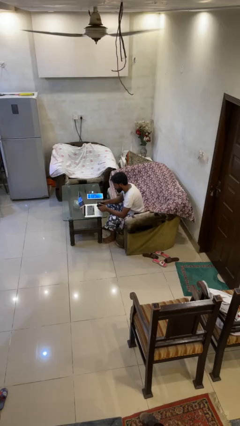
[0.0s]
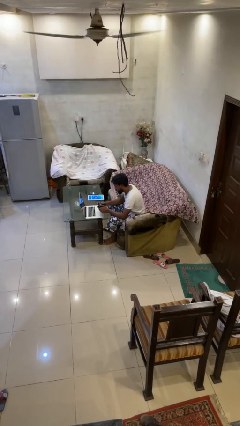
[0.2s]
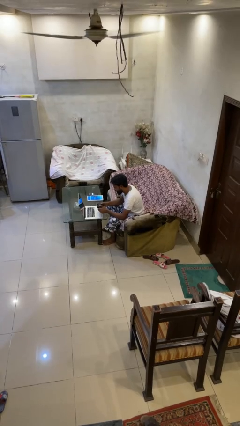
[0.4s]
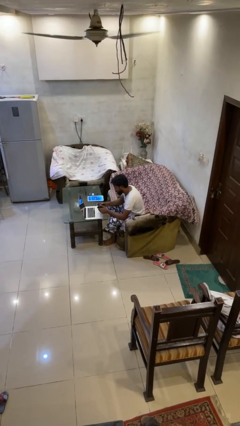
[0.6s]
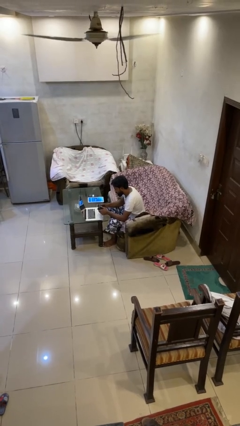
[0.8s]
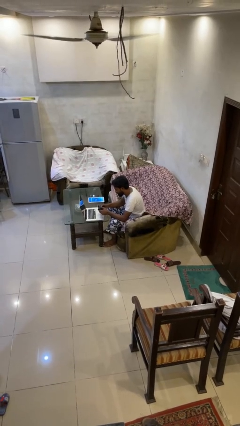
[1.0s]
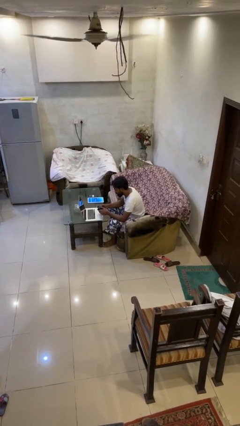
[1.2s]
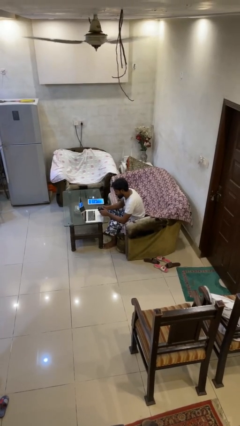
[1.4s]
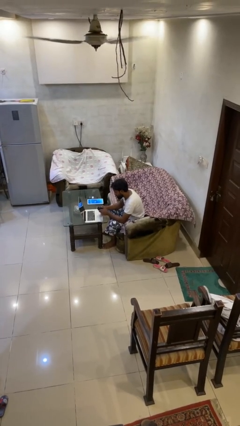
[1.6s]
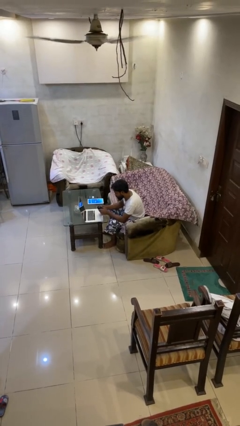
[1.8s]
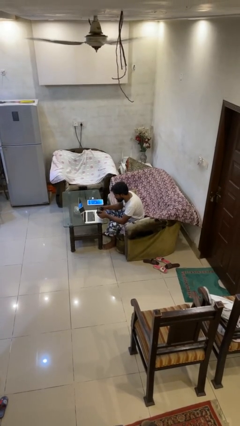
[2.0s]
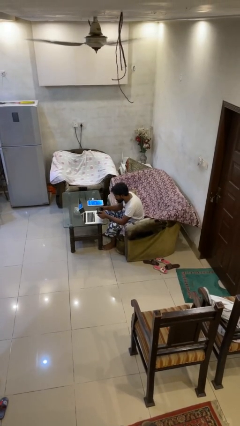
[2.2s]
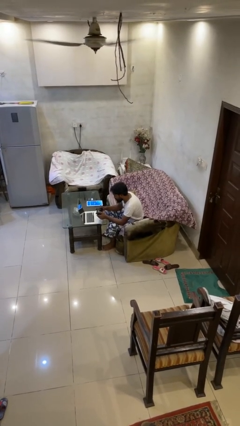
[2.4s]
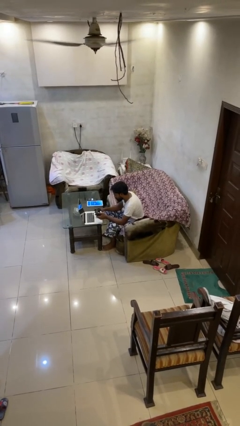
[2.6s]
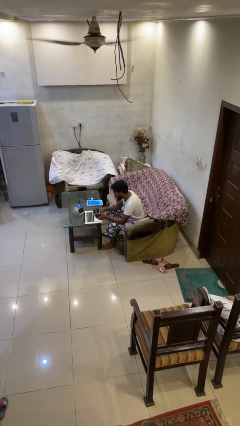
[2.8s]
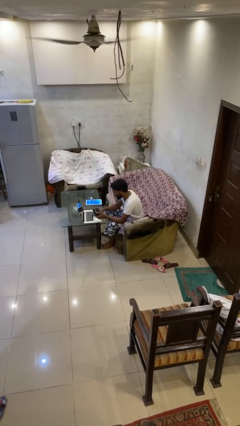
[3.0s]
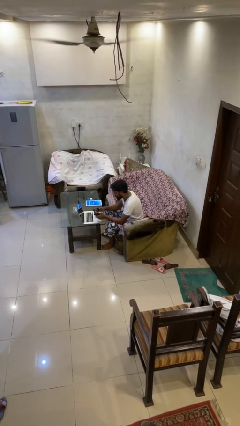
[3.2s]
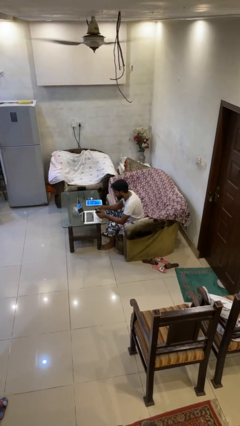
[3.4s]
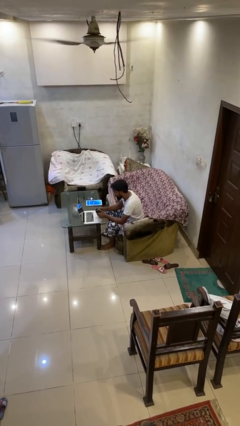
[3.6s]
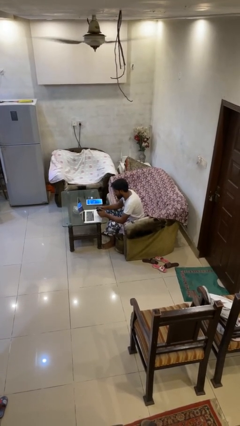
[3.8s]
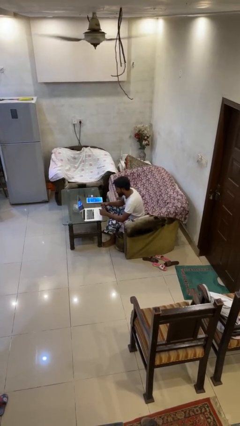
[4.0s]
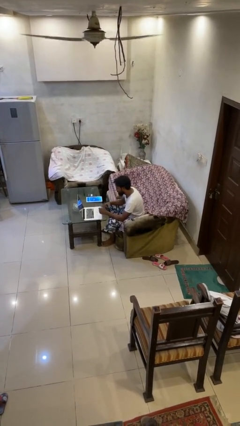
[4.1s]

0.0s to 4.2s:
person interacts with handheld game

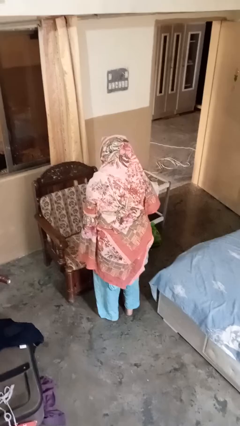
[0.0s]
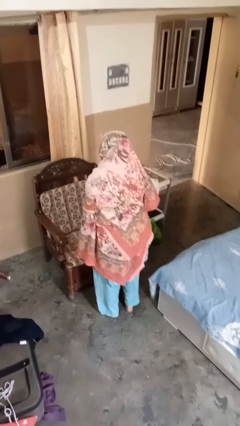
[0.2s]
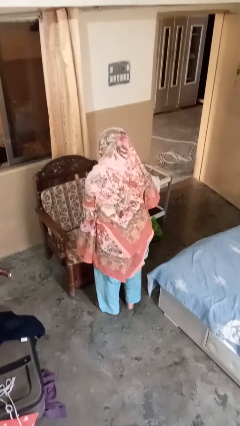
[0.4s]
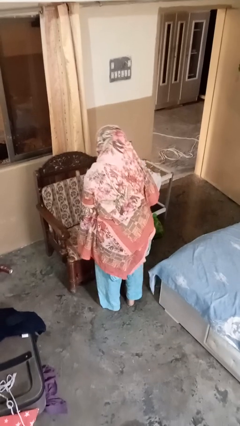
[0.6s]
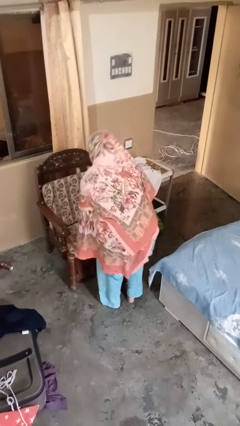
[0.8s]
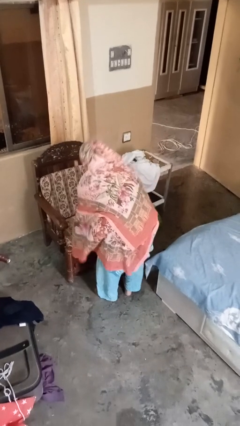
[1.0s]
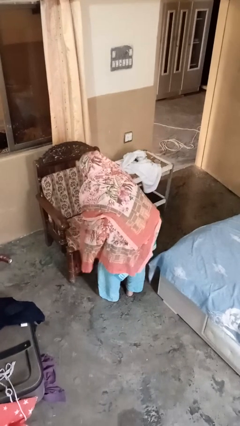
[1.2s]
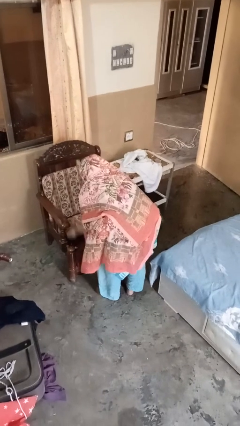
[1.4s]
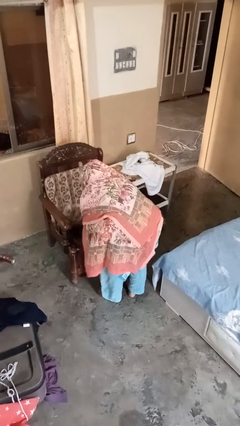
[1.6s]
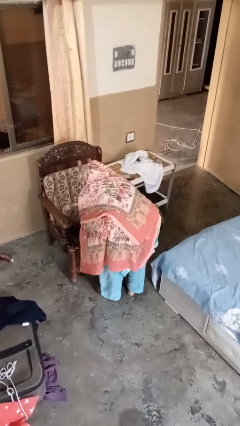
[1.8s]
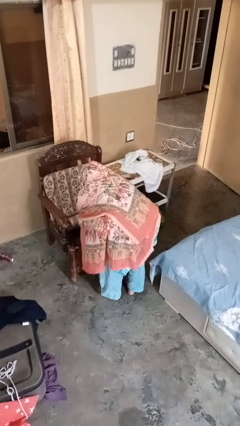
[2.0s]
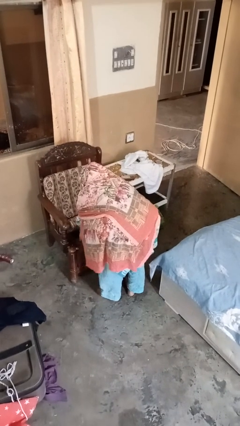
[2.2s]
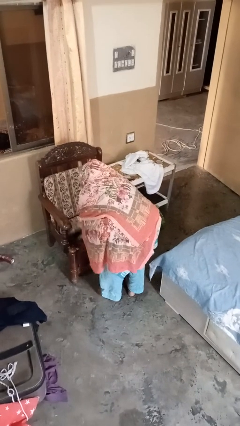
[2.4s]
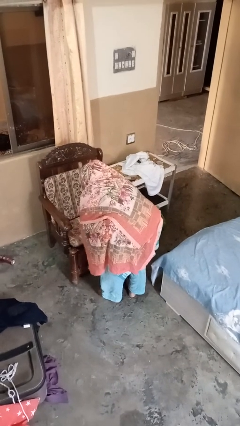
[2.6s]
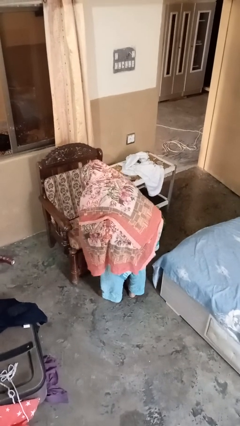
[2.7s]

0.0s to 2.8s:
person searches under couch

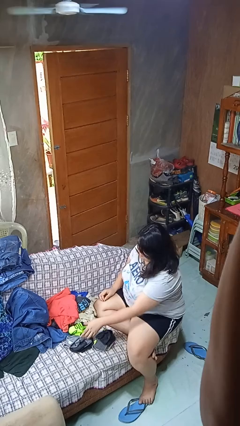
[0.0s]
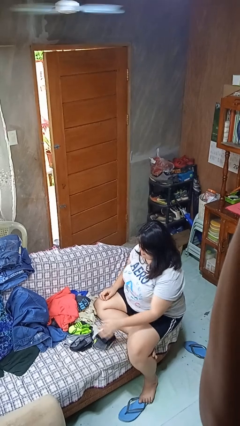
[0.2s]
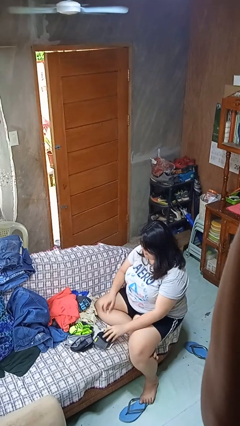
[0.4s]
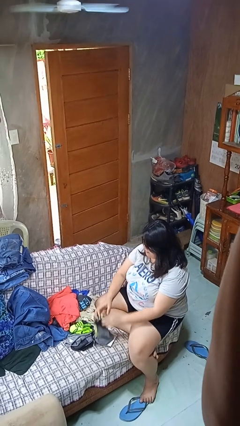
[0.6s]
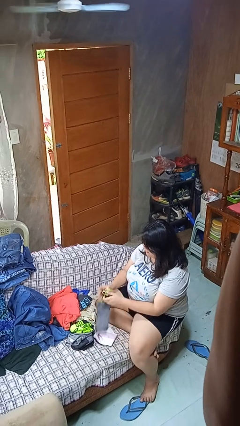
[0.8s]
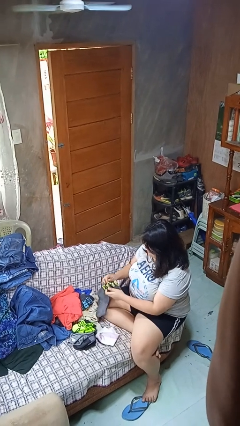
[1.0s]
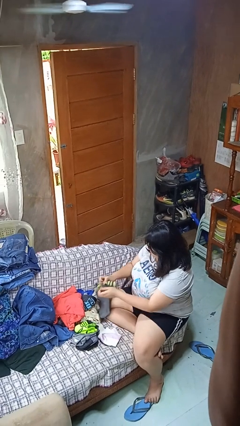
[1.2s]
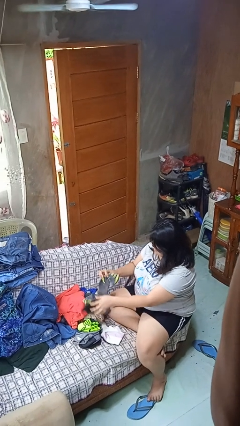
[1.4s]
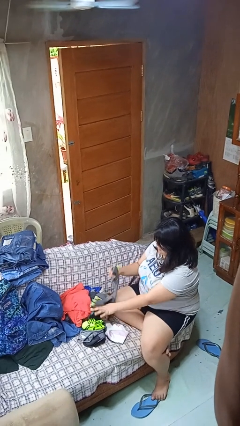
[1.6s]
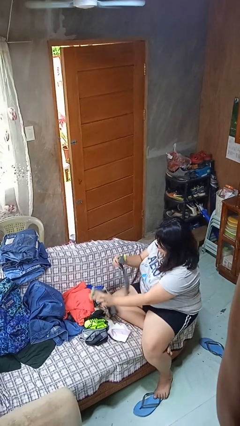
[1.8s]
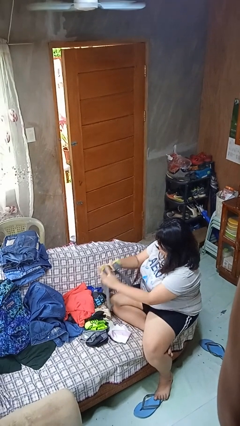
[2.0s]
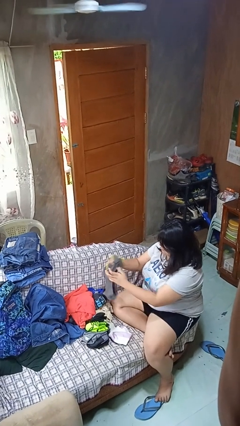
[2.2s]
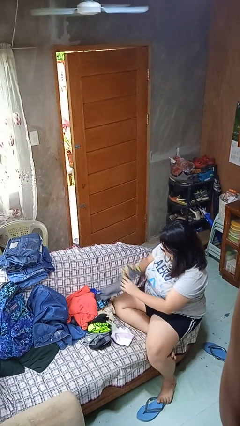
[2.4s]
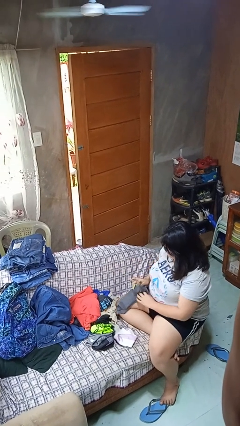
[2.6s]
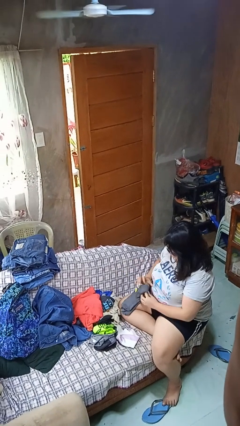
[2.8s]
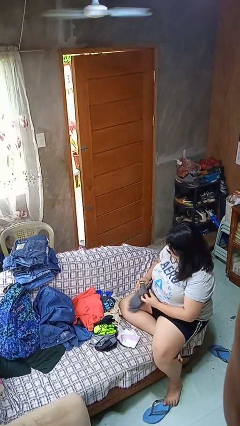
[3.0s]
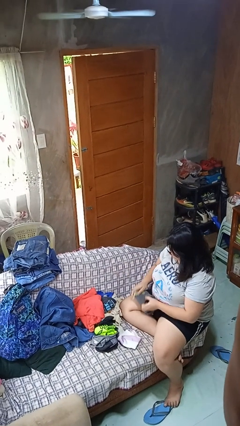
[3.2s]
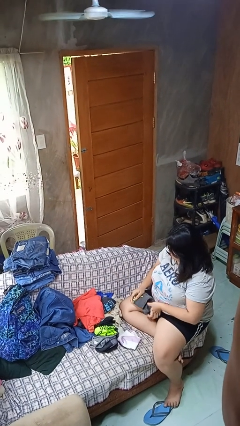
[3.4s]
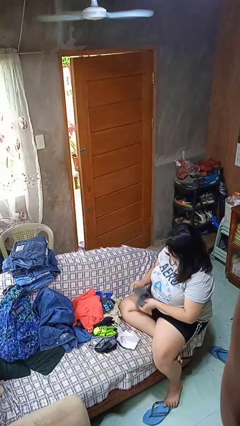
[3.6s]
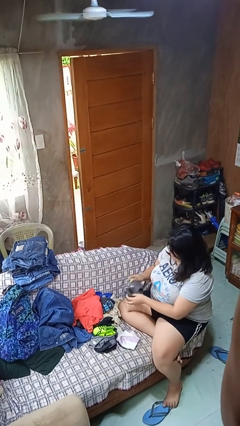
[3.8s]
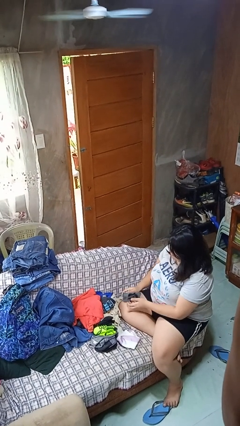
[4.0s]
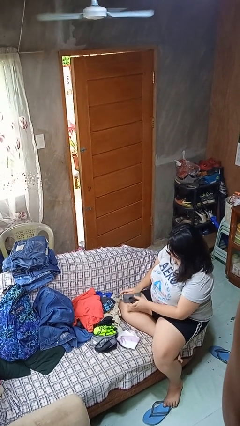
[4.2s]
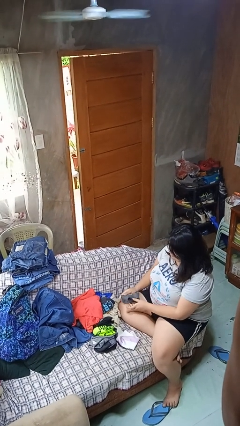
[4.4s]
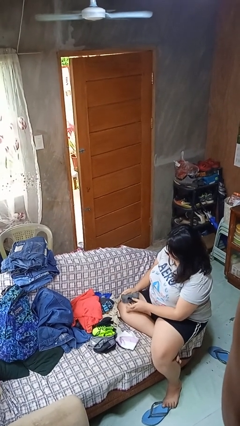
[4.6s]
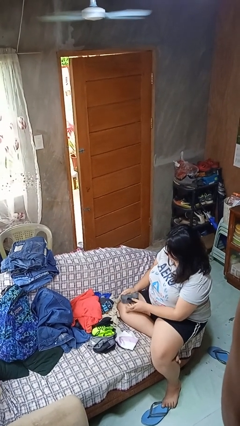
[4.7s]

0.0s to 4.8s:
person folds socks

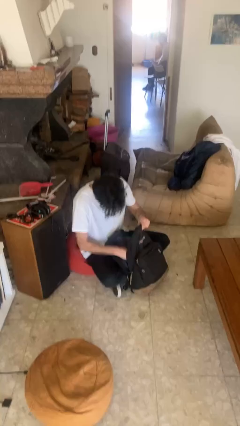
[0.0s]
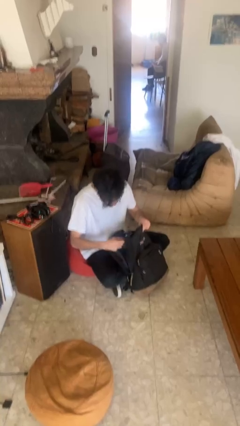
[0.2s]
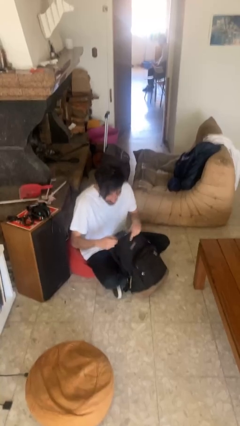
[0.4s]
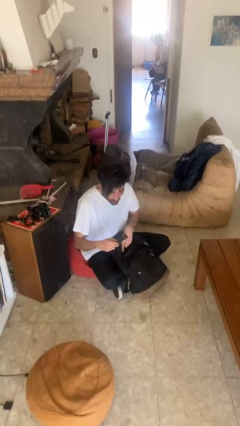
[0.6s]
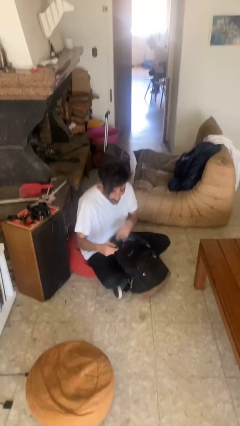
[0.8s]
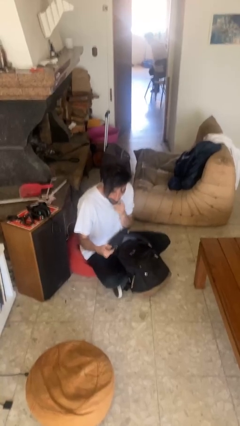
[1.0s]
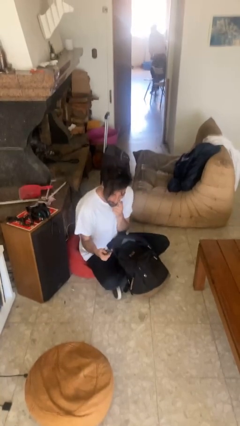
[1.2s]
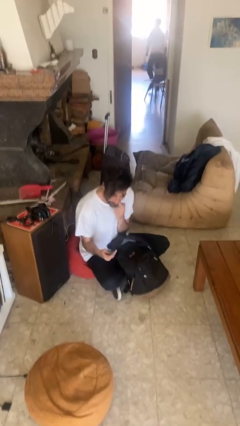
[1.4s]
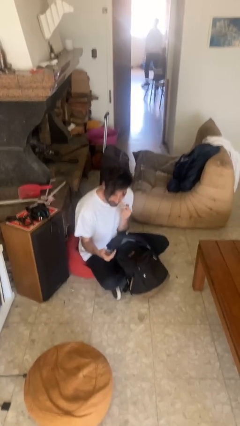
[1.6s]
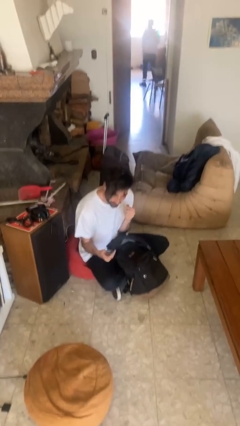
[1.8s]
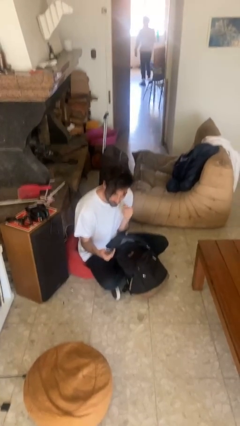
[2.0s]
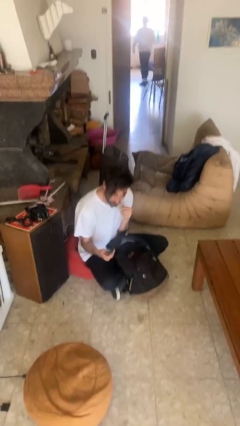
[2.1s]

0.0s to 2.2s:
person takes object from backpack

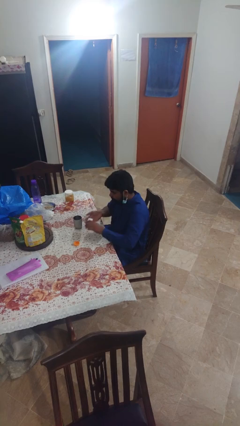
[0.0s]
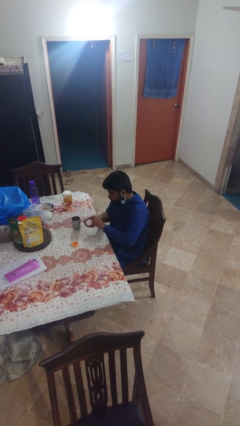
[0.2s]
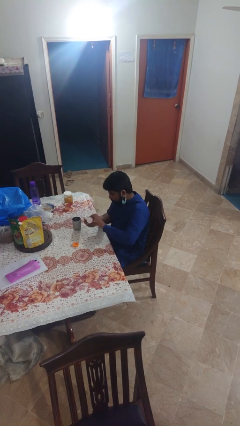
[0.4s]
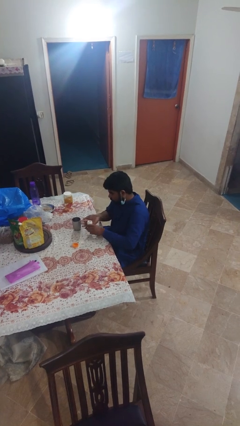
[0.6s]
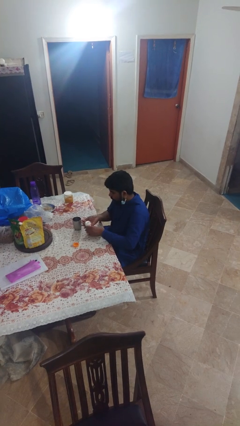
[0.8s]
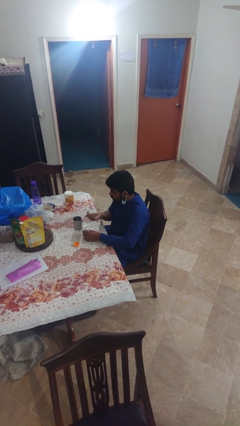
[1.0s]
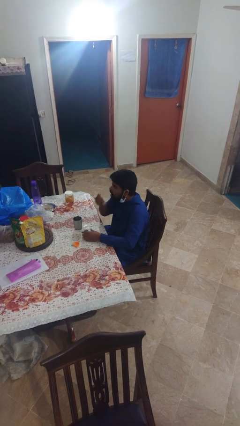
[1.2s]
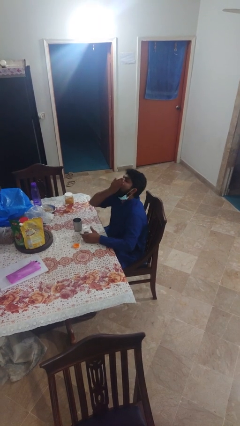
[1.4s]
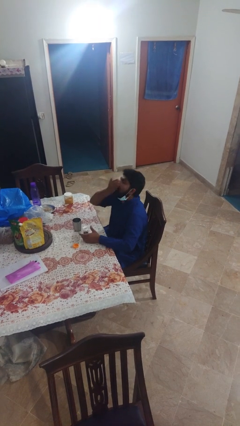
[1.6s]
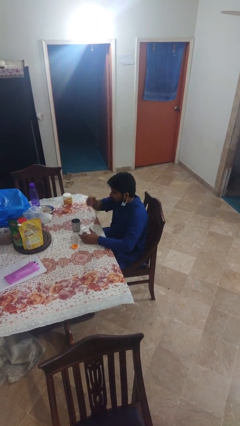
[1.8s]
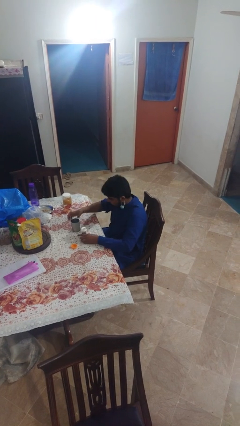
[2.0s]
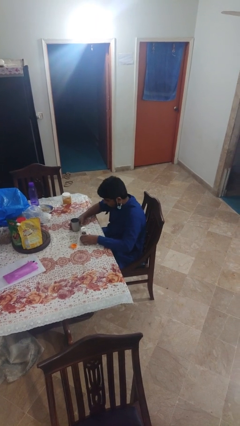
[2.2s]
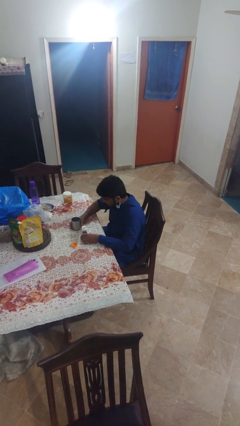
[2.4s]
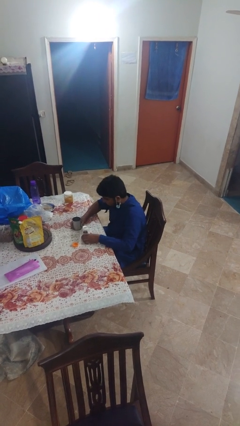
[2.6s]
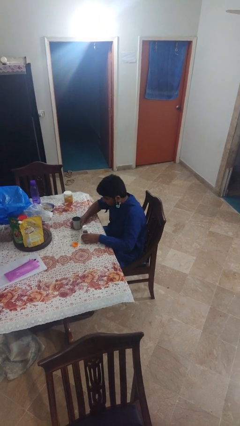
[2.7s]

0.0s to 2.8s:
person takes medicine pills

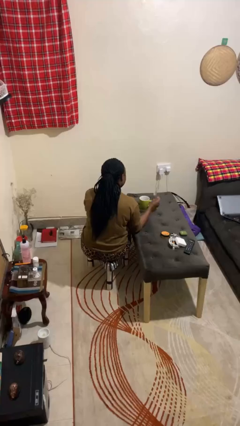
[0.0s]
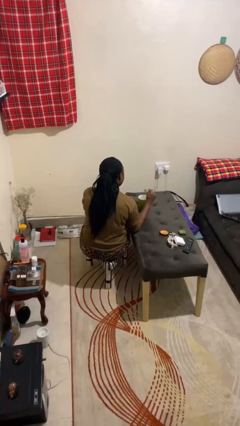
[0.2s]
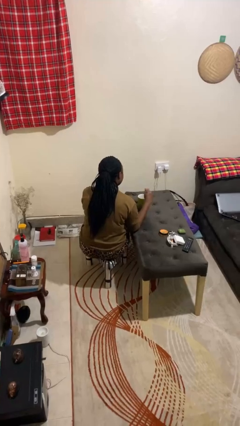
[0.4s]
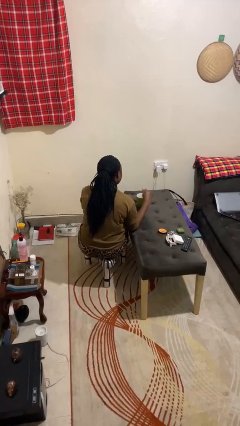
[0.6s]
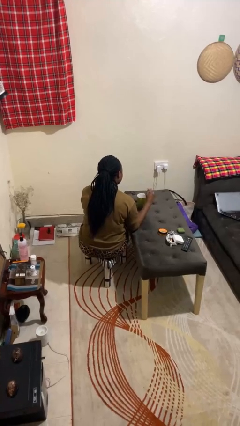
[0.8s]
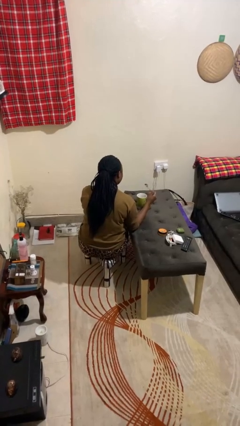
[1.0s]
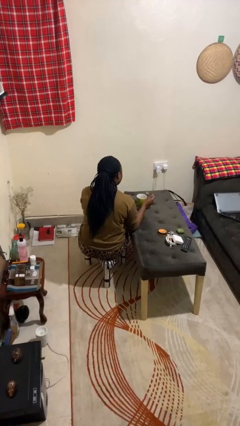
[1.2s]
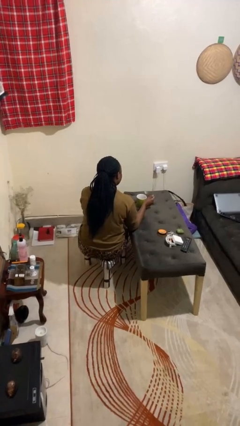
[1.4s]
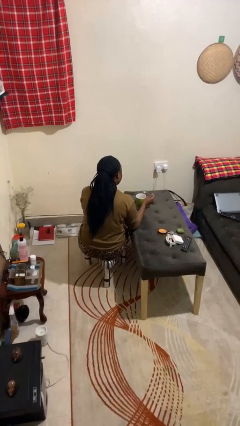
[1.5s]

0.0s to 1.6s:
person stirs mug
